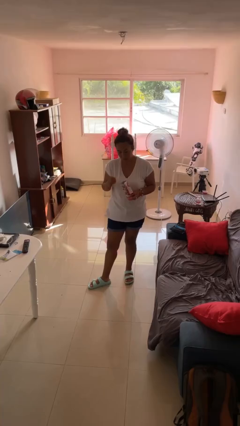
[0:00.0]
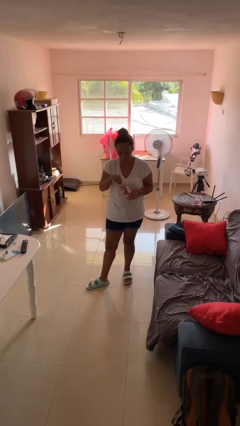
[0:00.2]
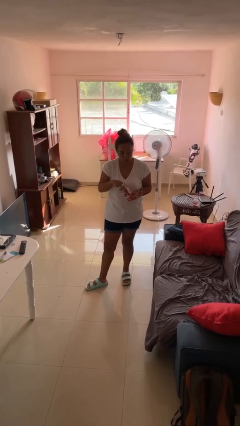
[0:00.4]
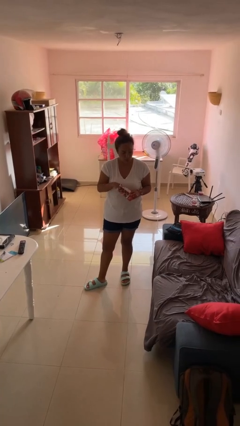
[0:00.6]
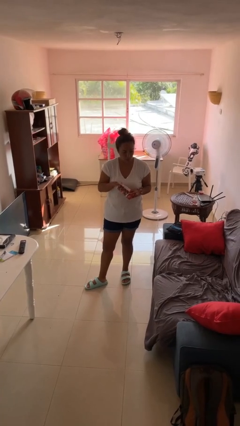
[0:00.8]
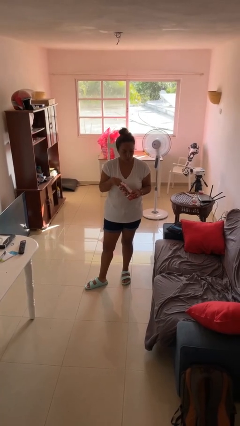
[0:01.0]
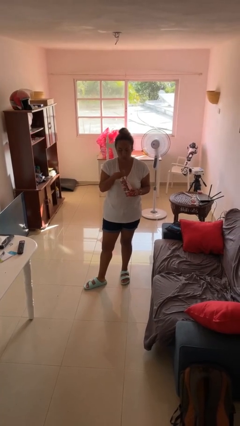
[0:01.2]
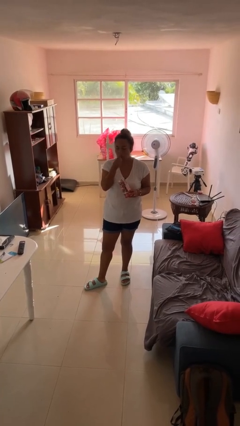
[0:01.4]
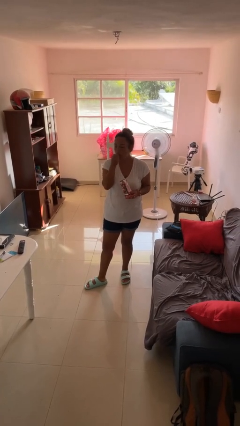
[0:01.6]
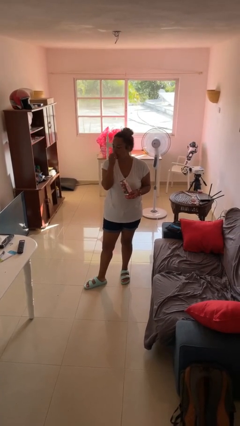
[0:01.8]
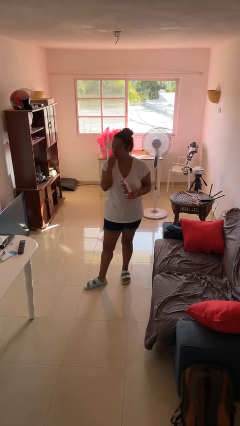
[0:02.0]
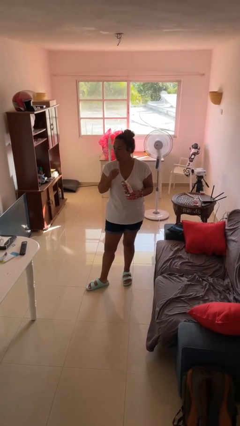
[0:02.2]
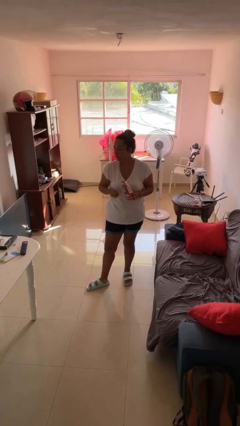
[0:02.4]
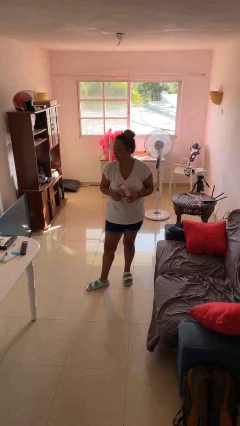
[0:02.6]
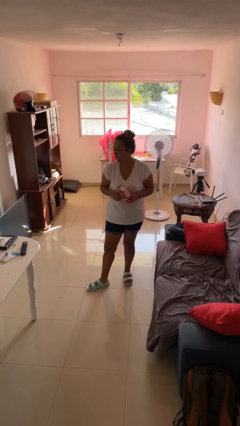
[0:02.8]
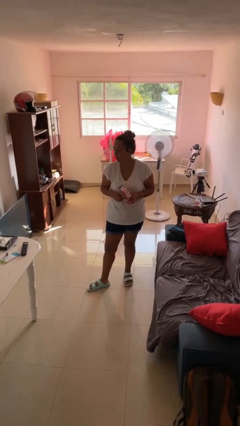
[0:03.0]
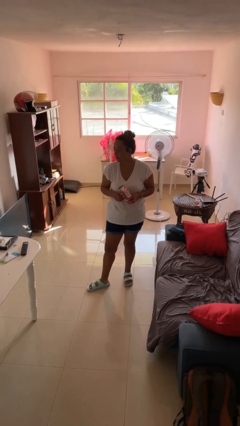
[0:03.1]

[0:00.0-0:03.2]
person eats snack from bag

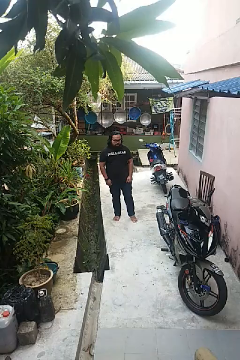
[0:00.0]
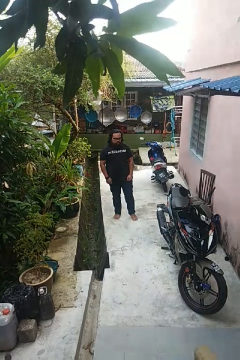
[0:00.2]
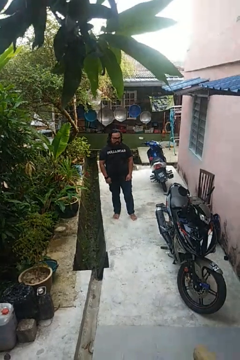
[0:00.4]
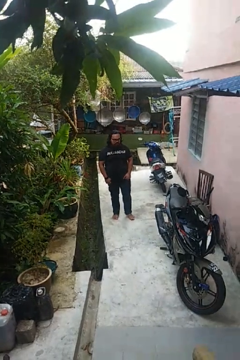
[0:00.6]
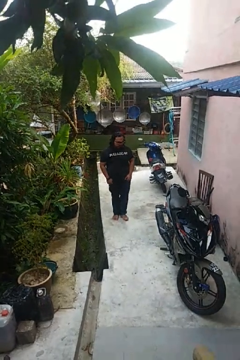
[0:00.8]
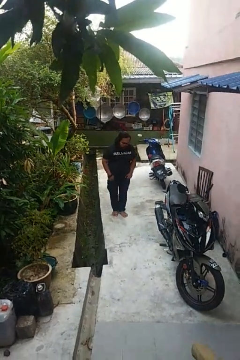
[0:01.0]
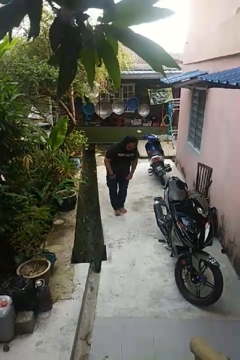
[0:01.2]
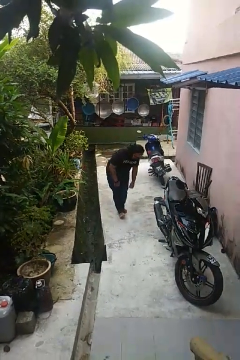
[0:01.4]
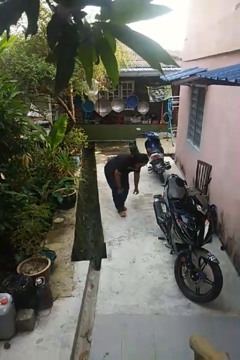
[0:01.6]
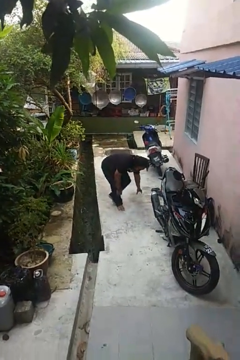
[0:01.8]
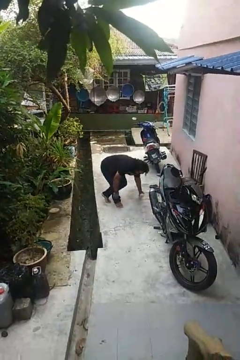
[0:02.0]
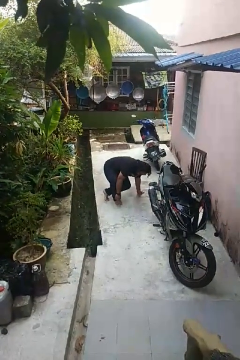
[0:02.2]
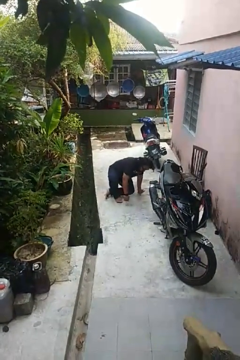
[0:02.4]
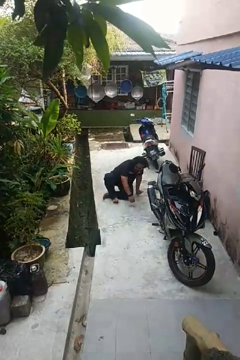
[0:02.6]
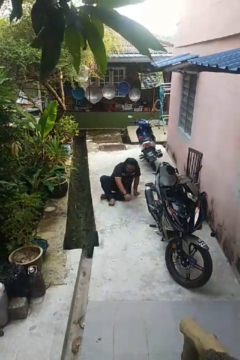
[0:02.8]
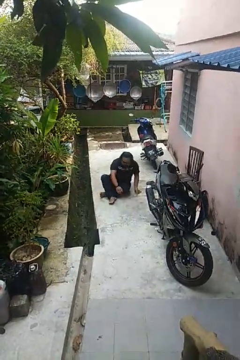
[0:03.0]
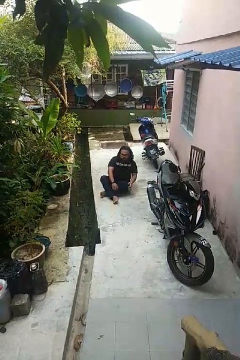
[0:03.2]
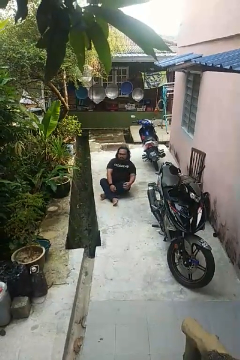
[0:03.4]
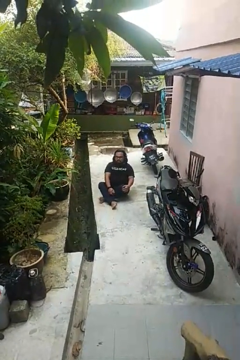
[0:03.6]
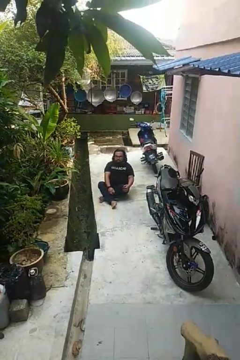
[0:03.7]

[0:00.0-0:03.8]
person sits crisscross

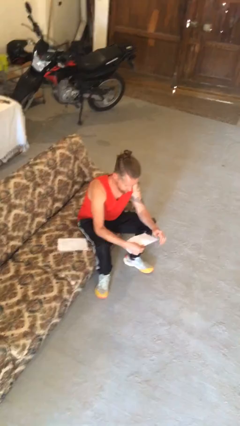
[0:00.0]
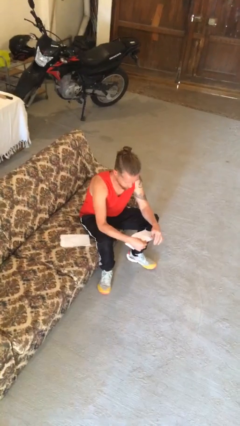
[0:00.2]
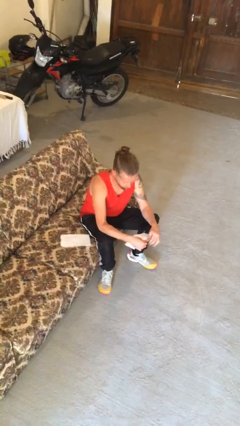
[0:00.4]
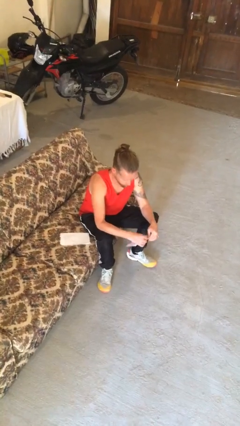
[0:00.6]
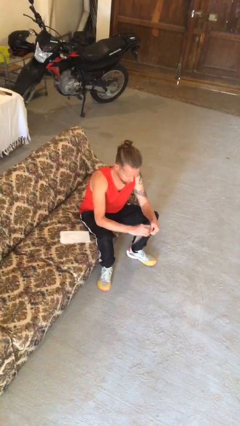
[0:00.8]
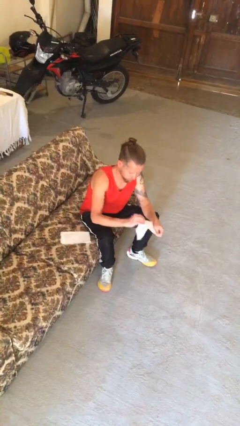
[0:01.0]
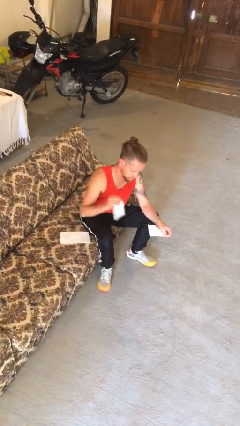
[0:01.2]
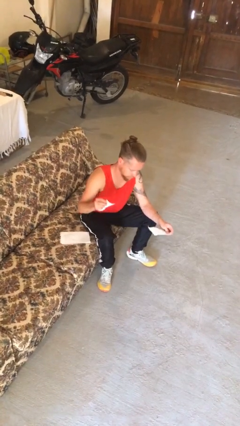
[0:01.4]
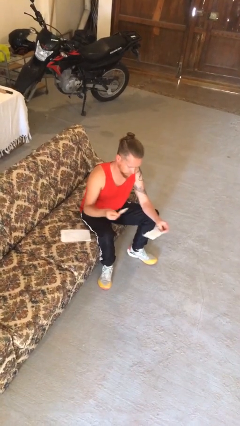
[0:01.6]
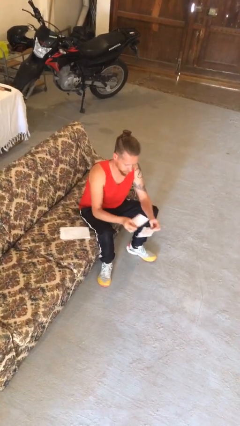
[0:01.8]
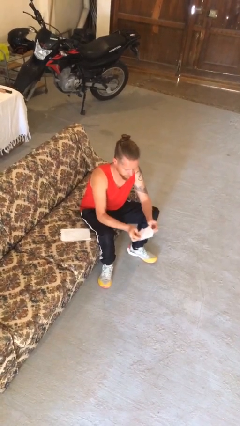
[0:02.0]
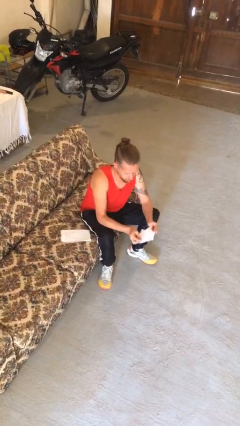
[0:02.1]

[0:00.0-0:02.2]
person tears paper

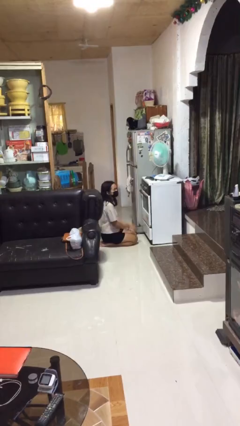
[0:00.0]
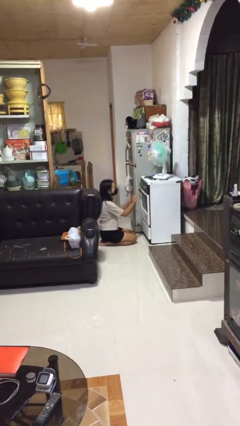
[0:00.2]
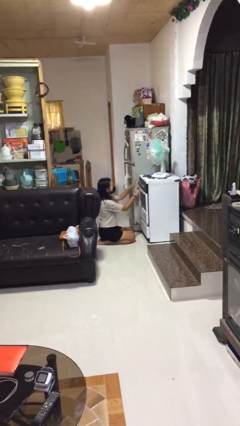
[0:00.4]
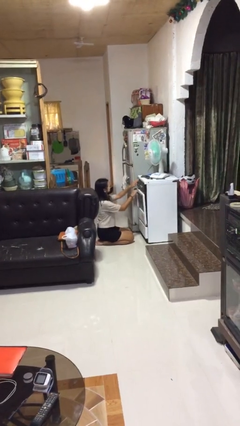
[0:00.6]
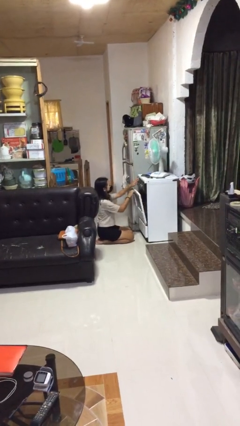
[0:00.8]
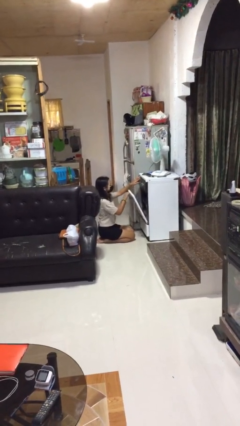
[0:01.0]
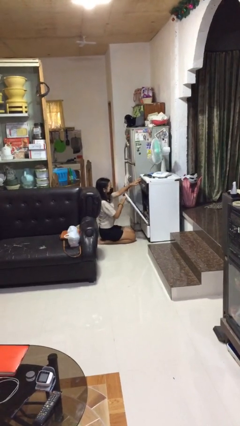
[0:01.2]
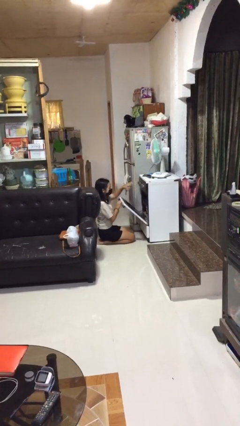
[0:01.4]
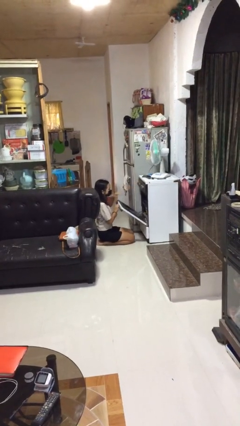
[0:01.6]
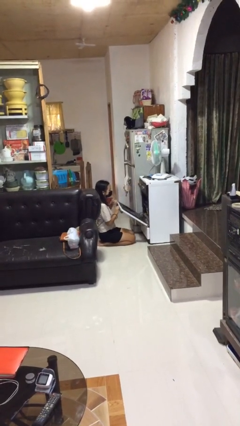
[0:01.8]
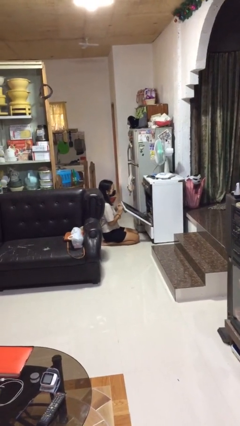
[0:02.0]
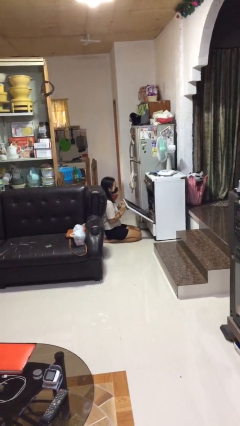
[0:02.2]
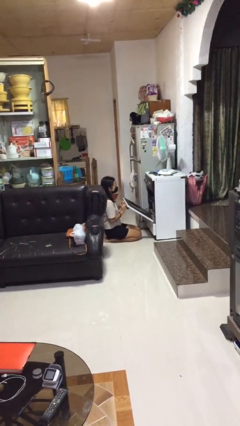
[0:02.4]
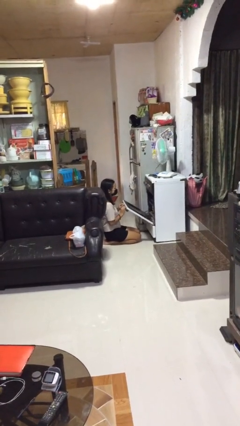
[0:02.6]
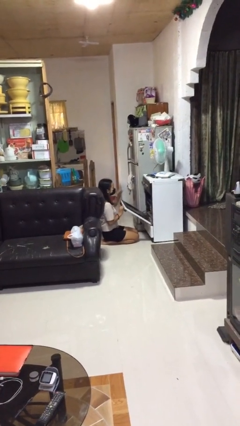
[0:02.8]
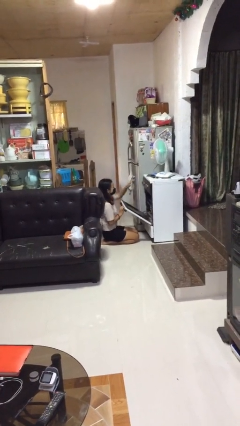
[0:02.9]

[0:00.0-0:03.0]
person opens oven door

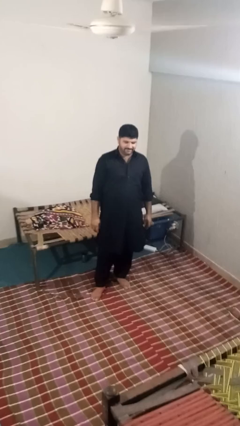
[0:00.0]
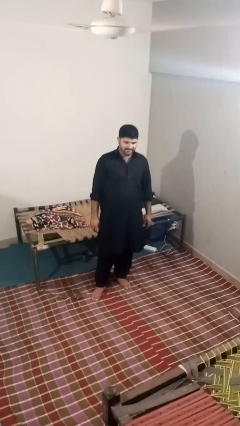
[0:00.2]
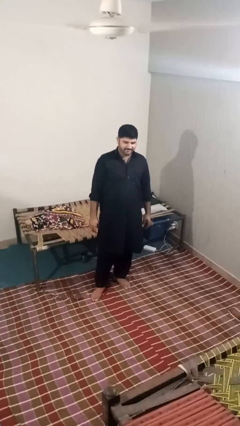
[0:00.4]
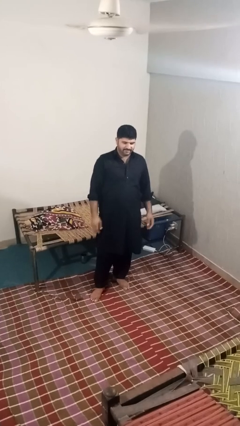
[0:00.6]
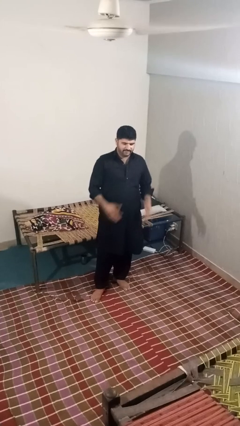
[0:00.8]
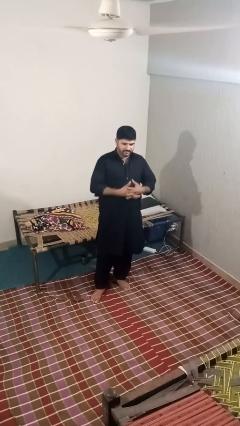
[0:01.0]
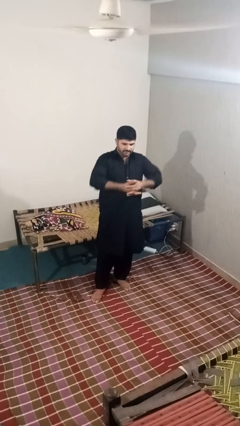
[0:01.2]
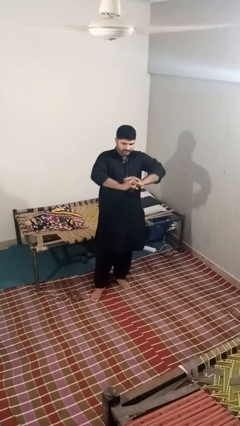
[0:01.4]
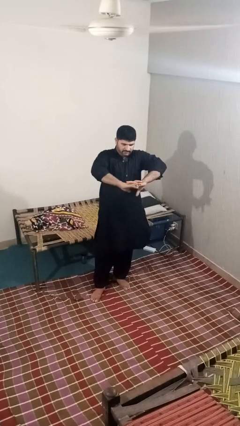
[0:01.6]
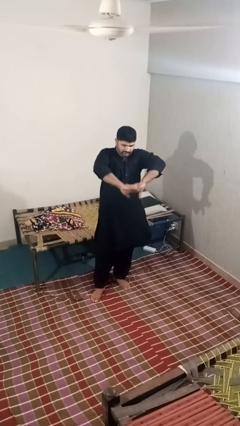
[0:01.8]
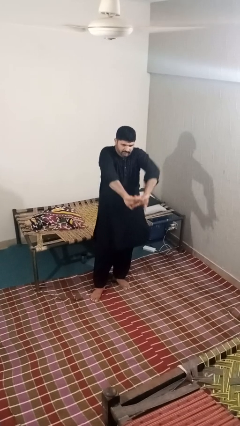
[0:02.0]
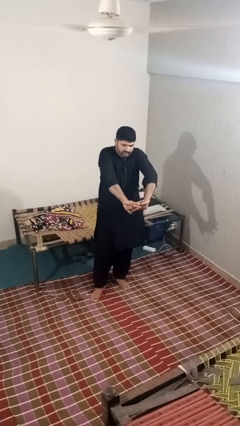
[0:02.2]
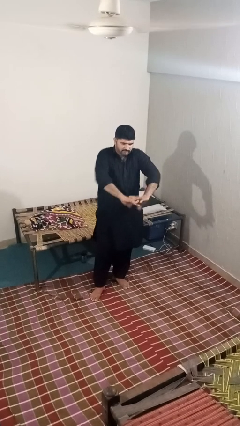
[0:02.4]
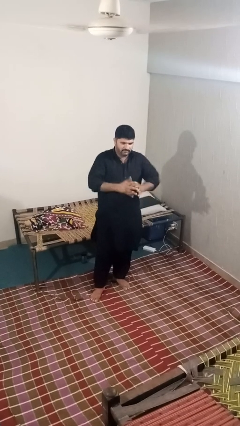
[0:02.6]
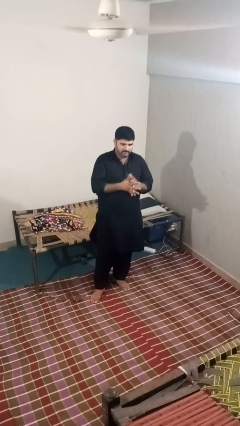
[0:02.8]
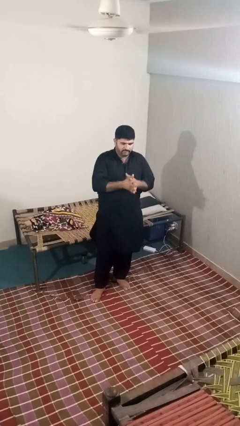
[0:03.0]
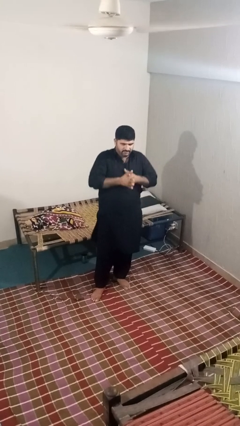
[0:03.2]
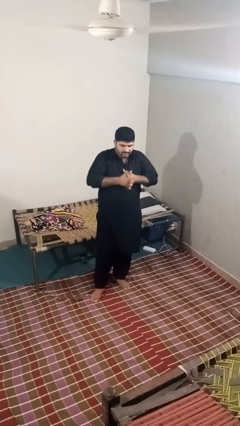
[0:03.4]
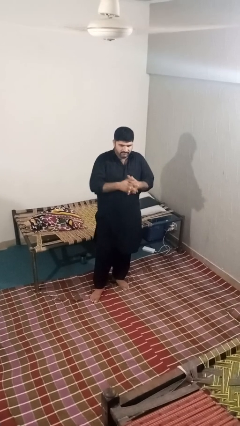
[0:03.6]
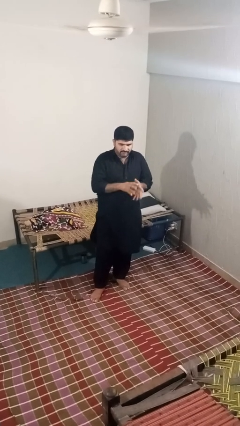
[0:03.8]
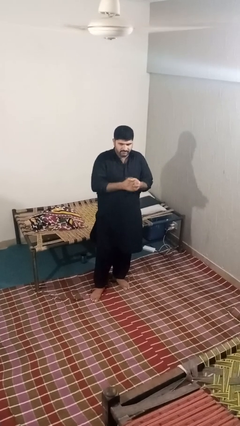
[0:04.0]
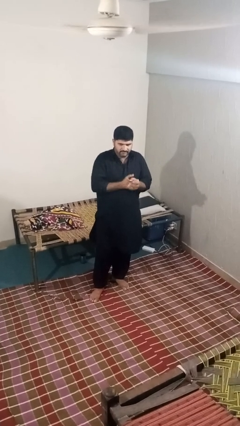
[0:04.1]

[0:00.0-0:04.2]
person cracks knuckles

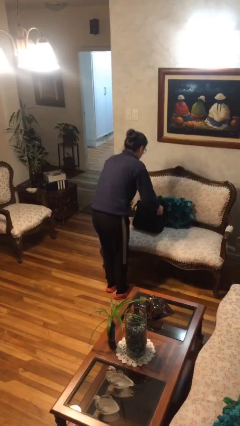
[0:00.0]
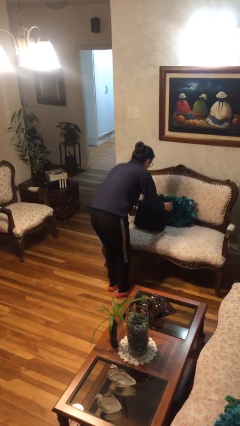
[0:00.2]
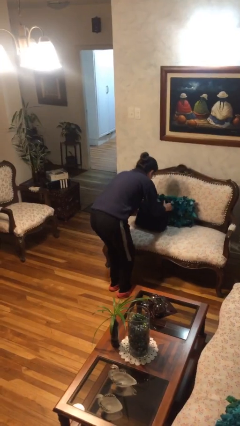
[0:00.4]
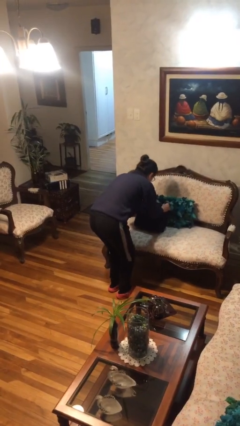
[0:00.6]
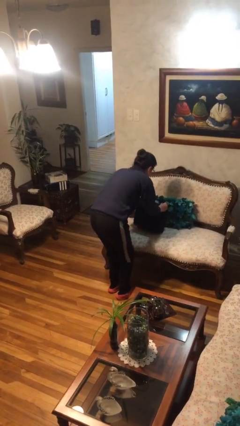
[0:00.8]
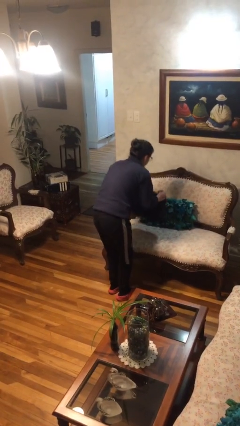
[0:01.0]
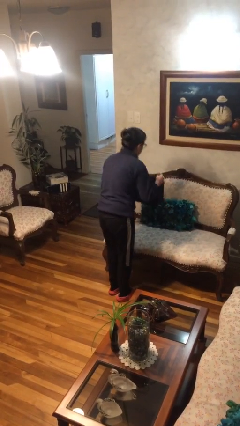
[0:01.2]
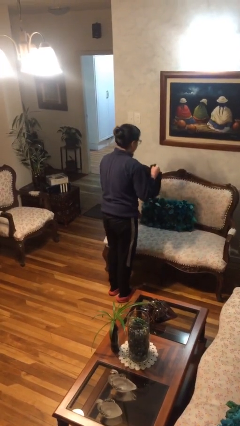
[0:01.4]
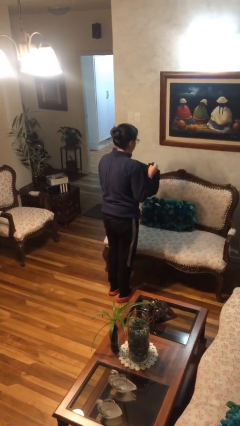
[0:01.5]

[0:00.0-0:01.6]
person picks up object from couch
